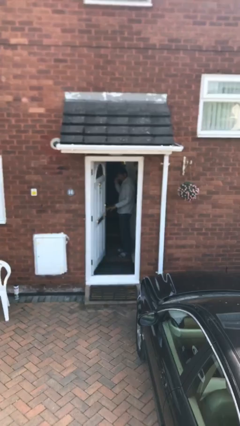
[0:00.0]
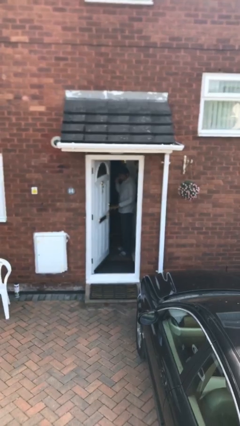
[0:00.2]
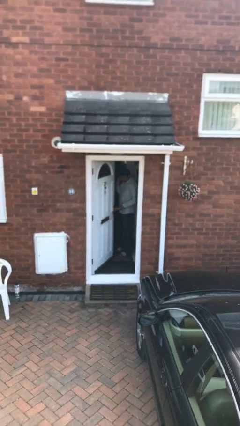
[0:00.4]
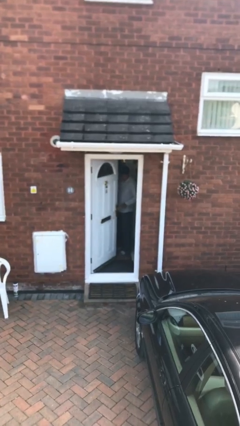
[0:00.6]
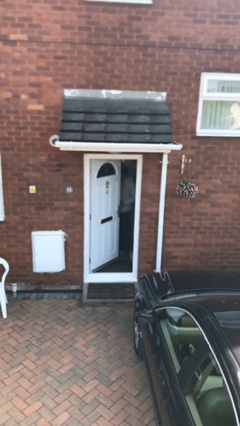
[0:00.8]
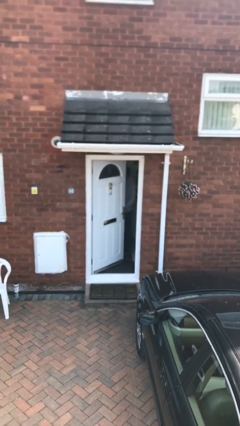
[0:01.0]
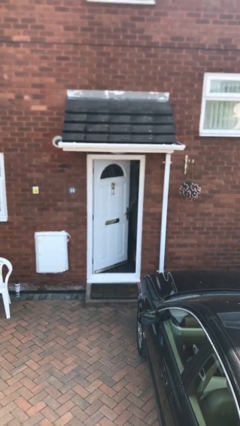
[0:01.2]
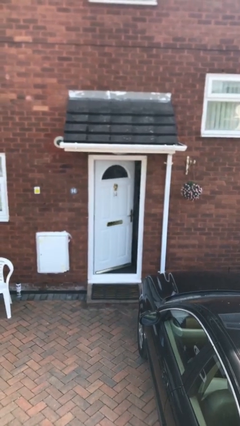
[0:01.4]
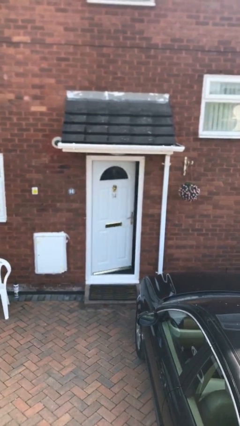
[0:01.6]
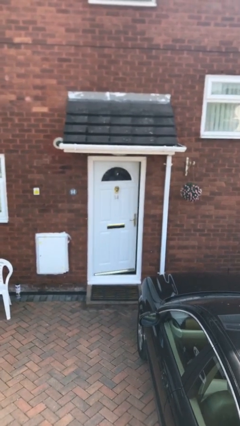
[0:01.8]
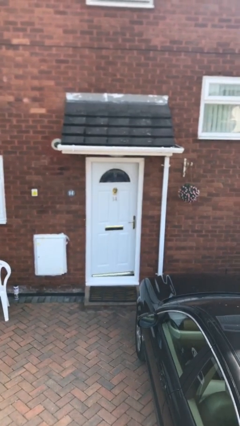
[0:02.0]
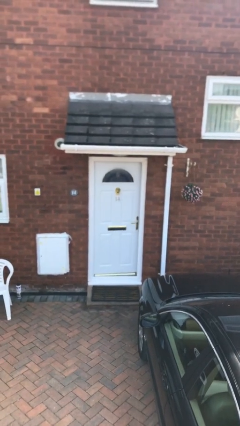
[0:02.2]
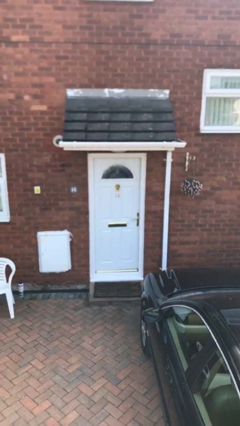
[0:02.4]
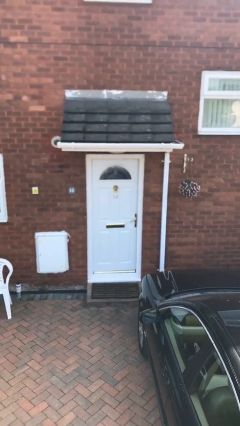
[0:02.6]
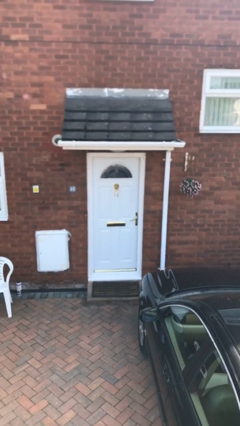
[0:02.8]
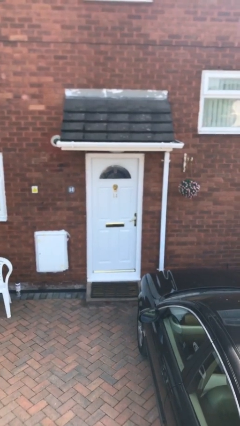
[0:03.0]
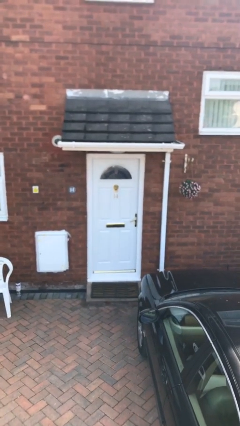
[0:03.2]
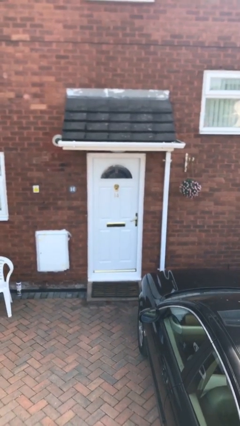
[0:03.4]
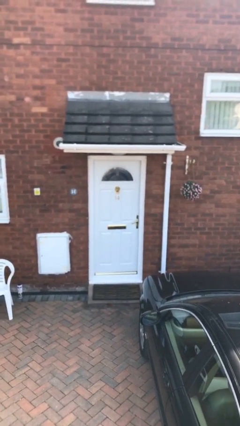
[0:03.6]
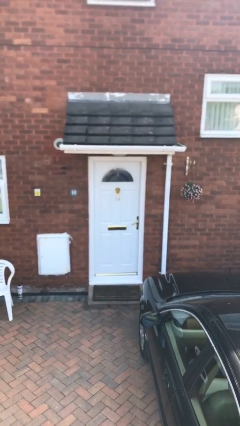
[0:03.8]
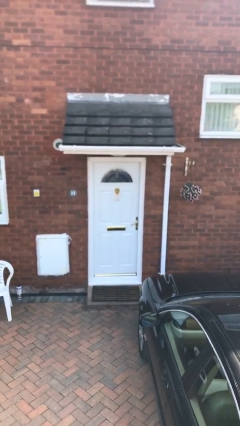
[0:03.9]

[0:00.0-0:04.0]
person closes facility door

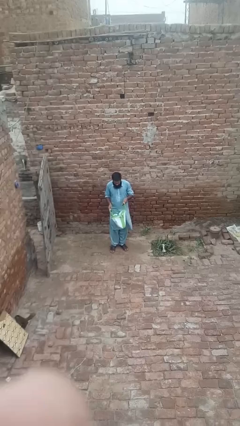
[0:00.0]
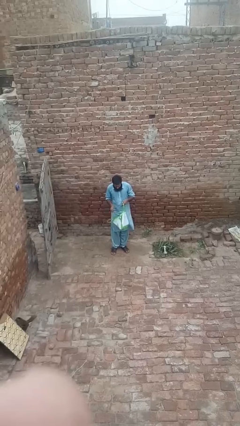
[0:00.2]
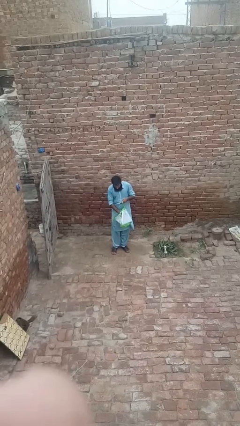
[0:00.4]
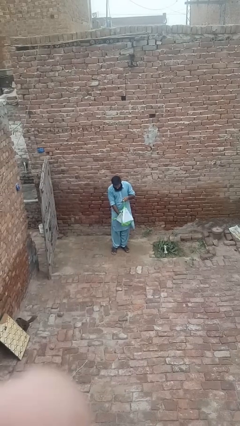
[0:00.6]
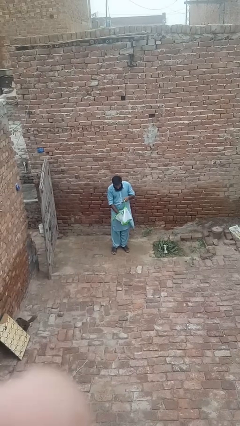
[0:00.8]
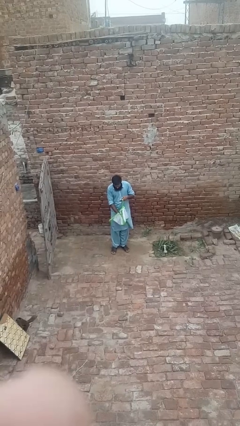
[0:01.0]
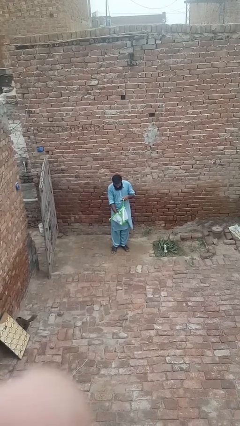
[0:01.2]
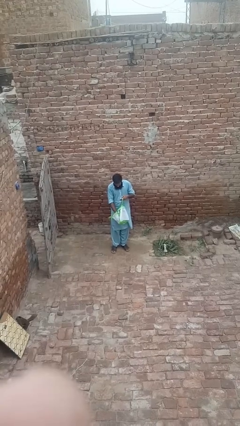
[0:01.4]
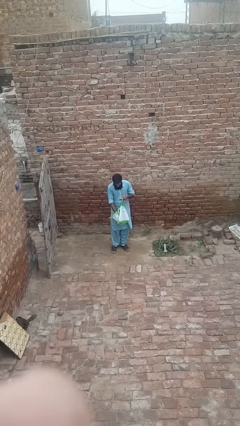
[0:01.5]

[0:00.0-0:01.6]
person searches in bag

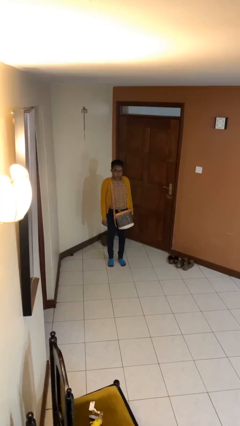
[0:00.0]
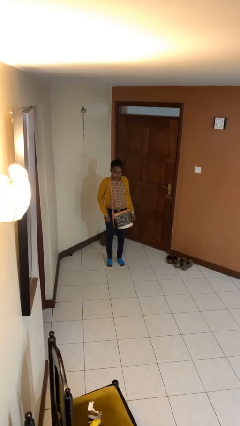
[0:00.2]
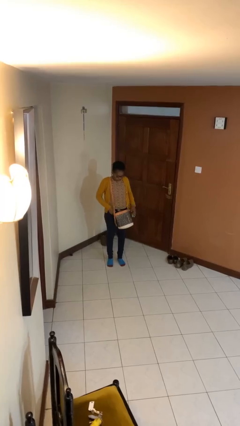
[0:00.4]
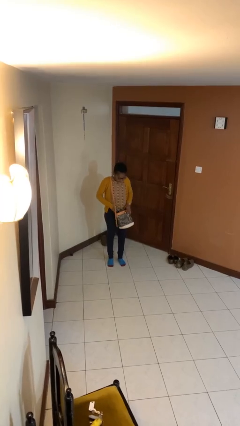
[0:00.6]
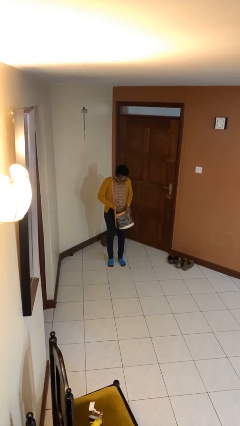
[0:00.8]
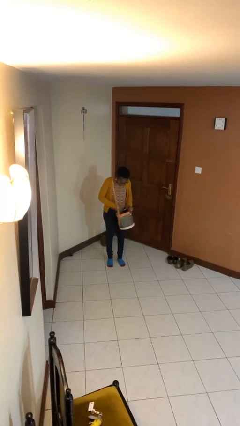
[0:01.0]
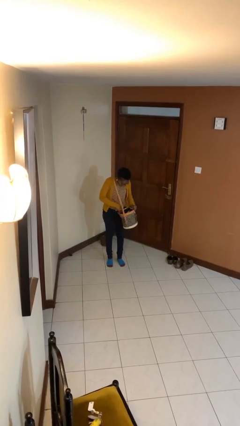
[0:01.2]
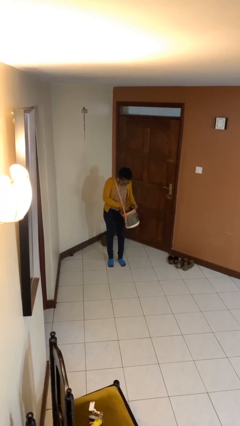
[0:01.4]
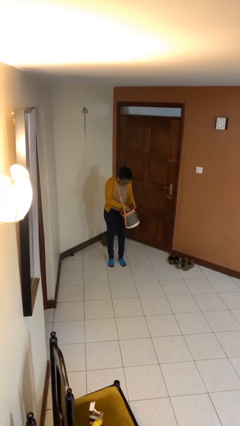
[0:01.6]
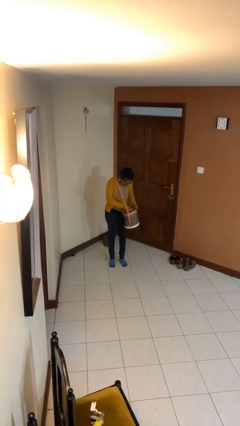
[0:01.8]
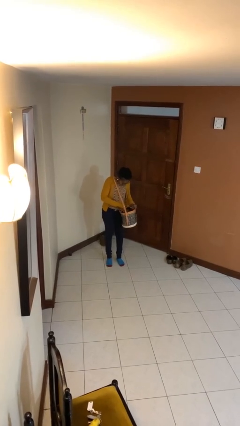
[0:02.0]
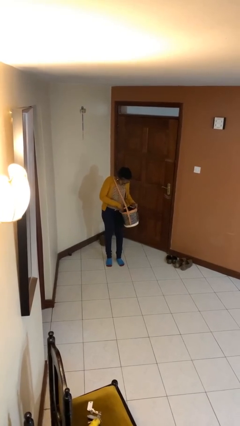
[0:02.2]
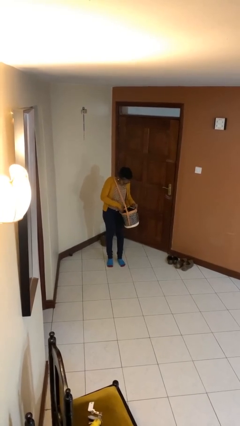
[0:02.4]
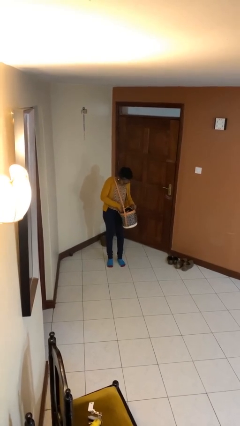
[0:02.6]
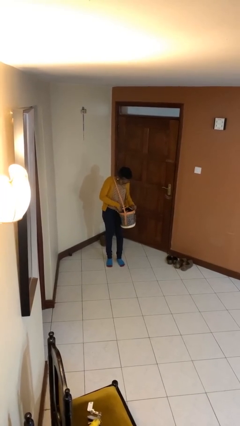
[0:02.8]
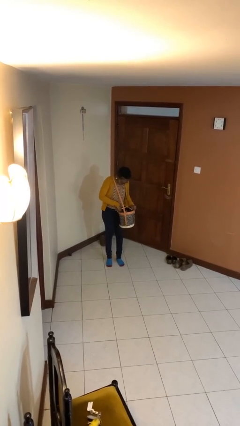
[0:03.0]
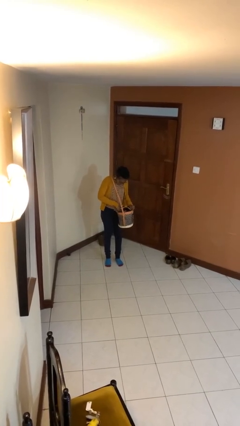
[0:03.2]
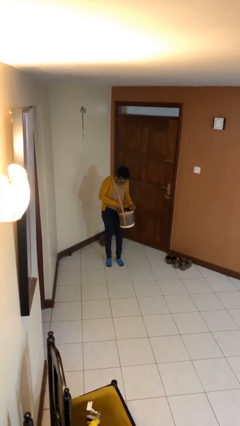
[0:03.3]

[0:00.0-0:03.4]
person searches in purse

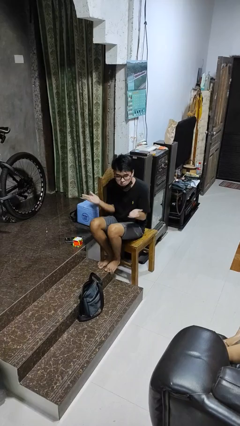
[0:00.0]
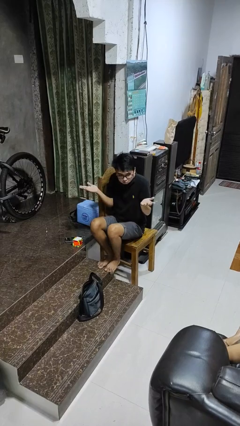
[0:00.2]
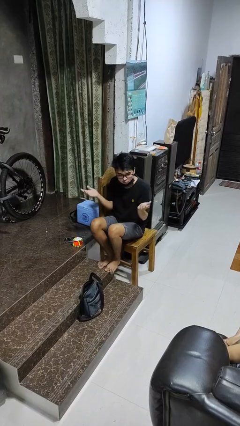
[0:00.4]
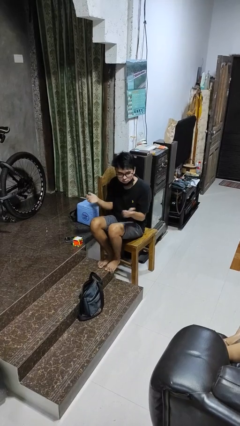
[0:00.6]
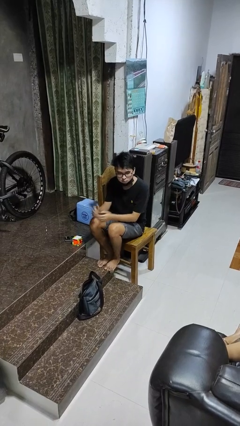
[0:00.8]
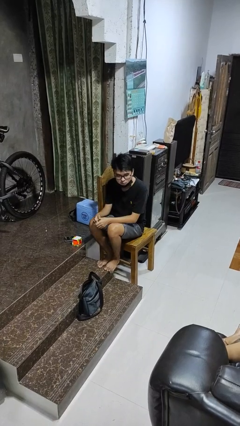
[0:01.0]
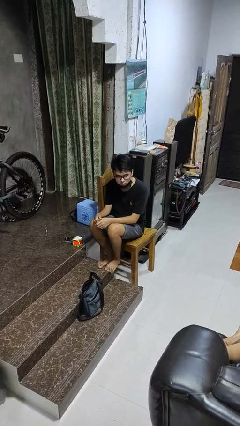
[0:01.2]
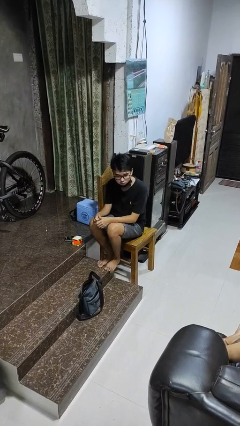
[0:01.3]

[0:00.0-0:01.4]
person shrugs

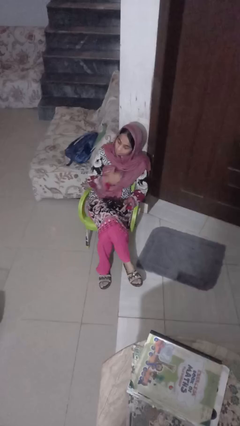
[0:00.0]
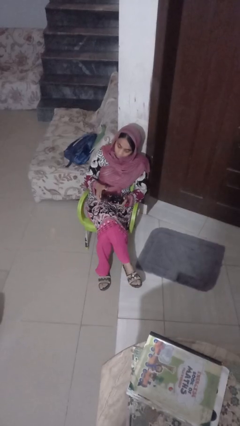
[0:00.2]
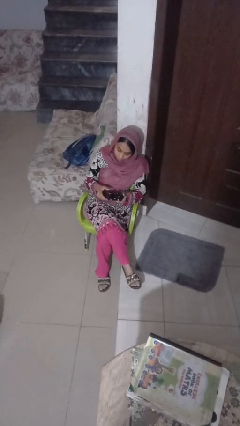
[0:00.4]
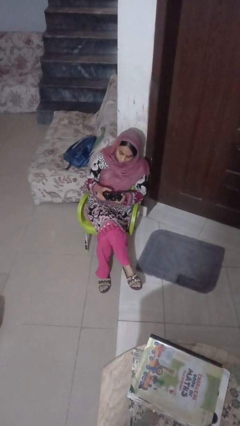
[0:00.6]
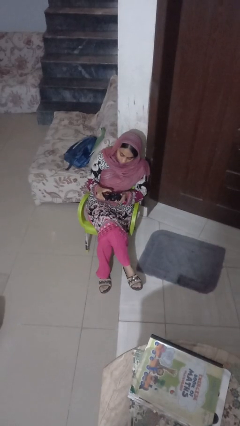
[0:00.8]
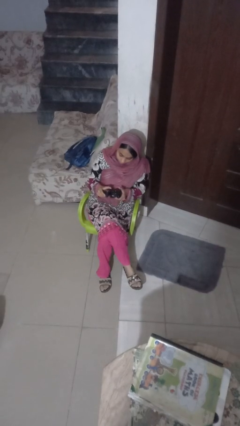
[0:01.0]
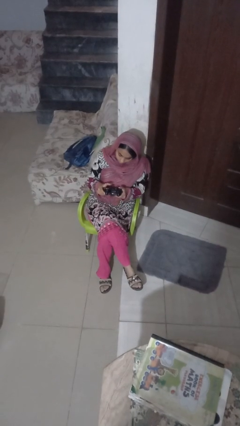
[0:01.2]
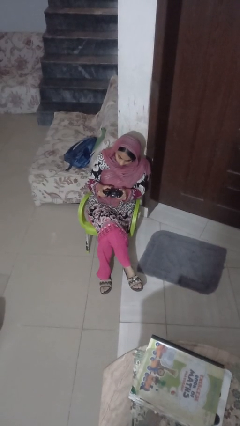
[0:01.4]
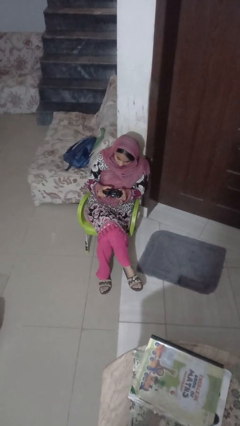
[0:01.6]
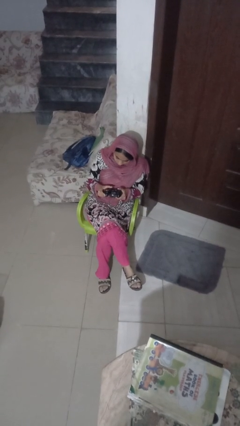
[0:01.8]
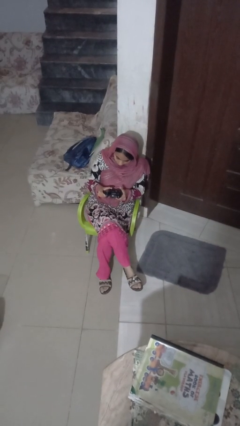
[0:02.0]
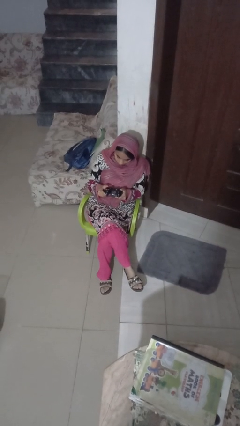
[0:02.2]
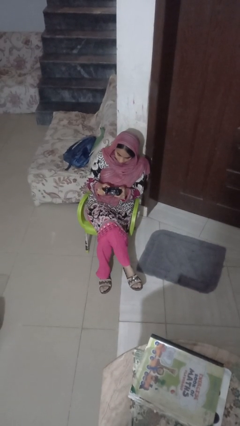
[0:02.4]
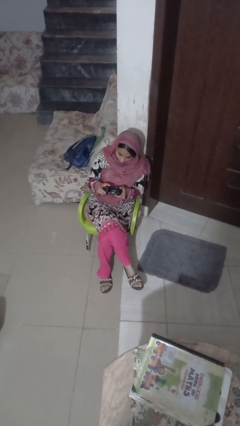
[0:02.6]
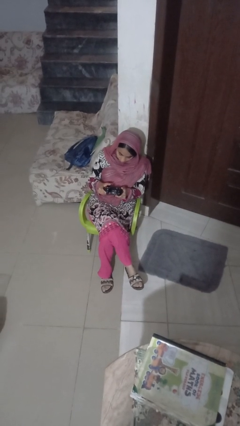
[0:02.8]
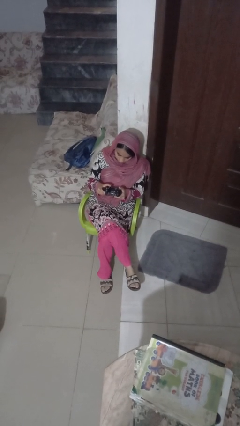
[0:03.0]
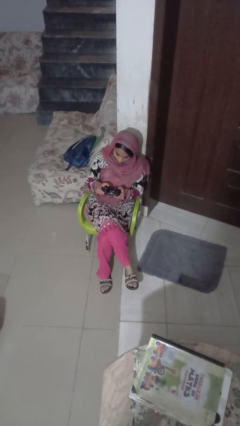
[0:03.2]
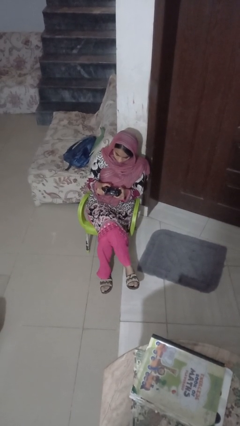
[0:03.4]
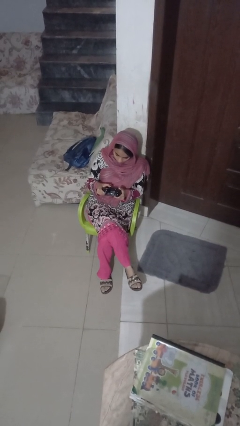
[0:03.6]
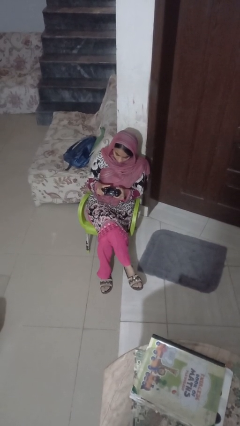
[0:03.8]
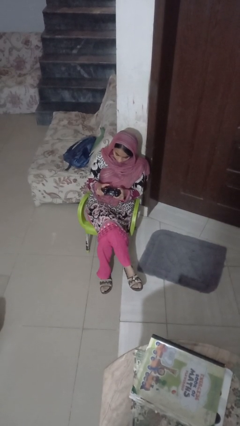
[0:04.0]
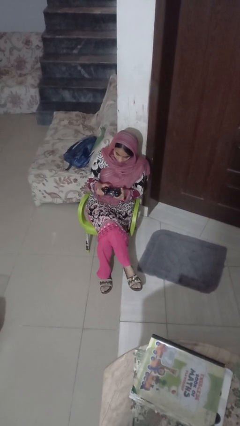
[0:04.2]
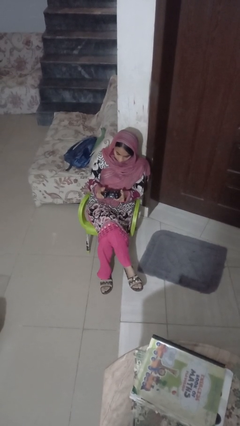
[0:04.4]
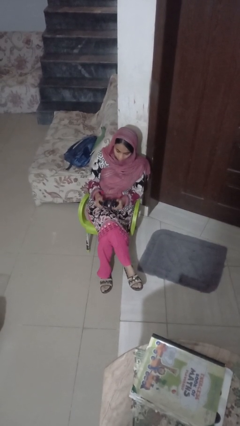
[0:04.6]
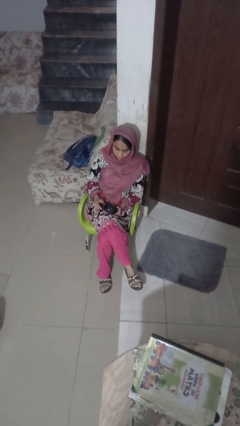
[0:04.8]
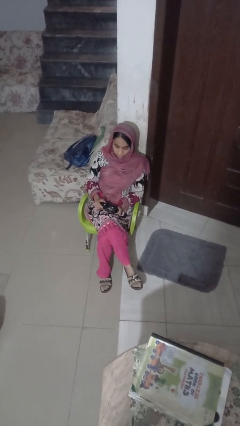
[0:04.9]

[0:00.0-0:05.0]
person interacts with handheld game

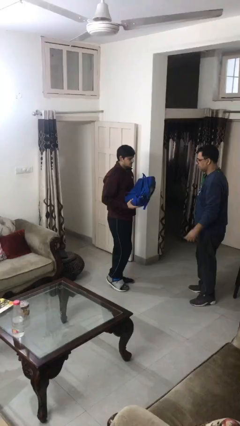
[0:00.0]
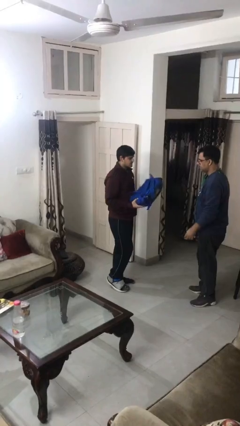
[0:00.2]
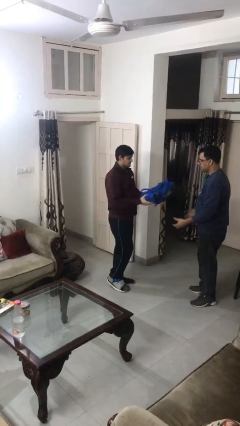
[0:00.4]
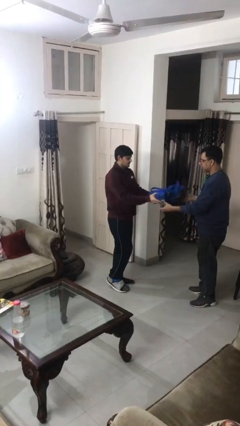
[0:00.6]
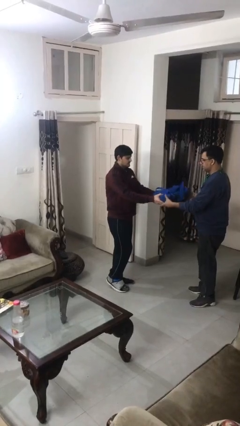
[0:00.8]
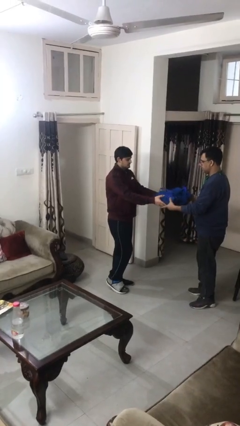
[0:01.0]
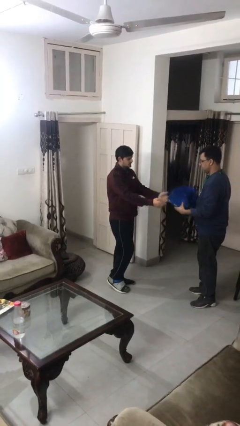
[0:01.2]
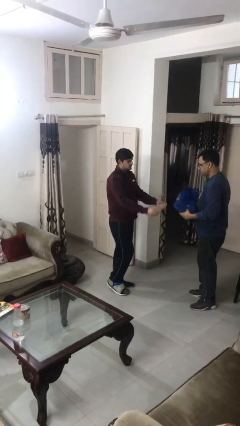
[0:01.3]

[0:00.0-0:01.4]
person transfers object to person
